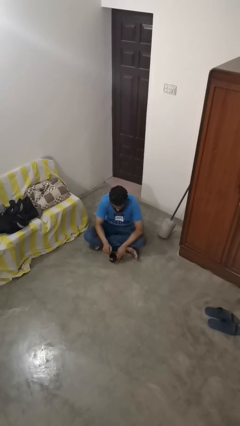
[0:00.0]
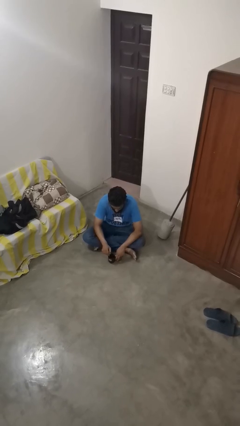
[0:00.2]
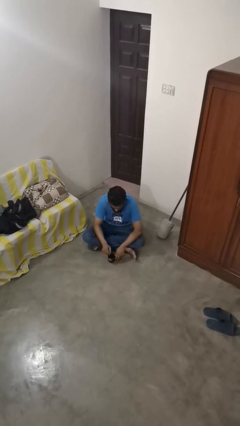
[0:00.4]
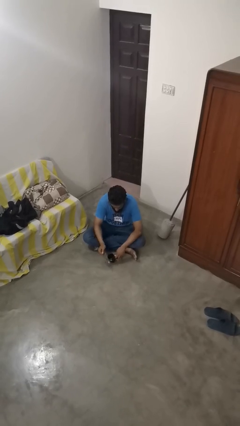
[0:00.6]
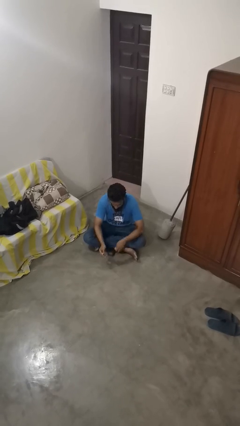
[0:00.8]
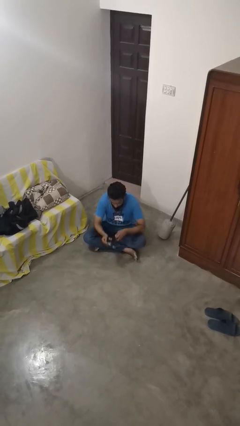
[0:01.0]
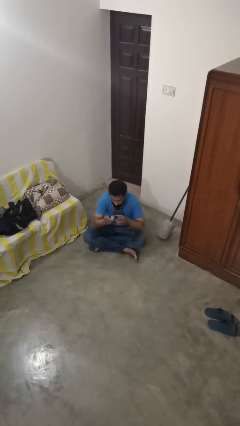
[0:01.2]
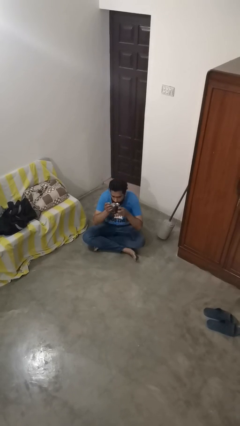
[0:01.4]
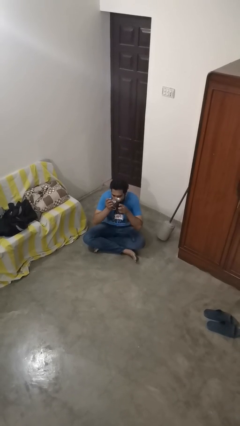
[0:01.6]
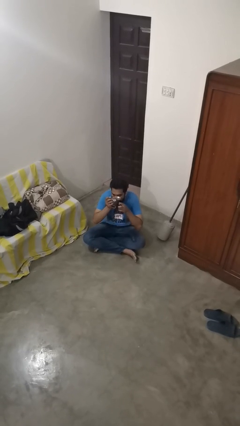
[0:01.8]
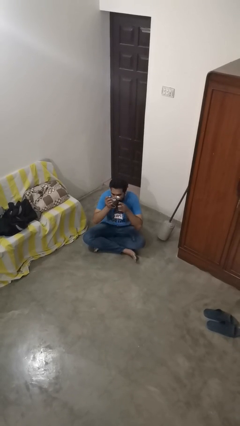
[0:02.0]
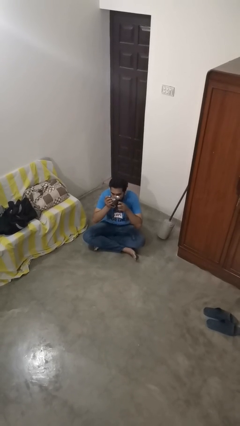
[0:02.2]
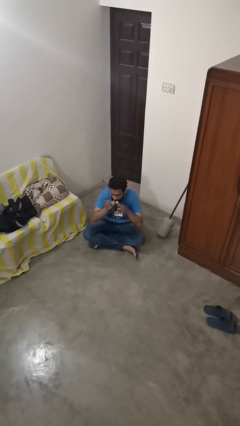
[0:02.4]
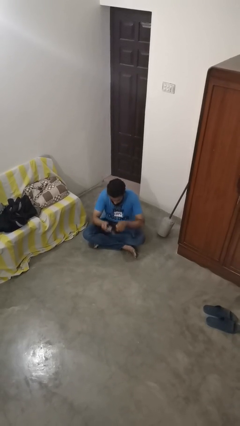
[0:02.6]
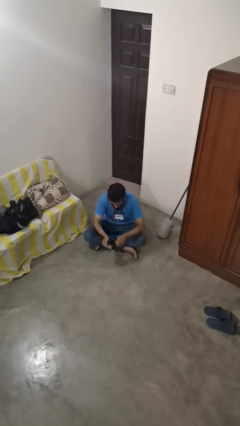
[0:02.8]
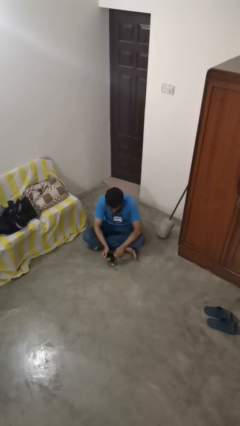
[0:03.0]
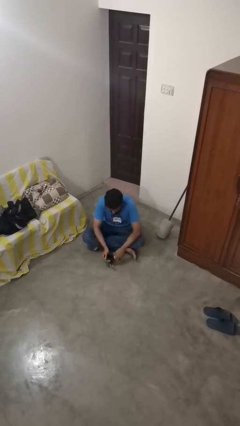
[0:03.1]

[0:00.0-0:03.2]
person drinks from mug

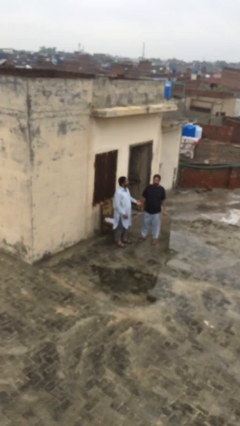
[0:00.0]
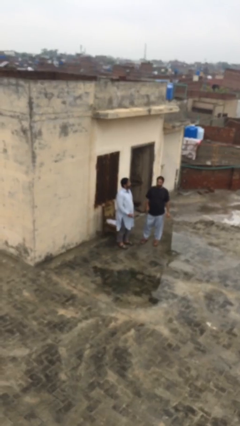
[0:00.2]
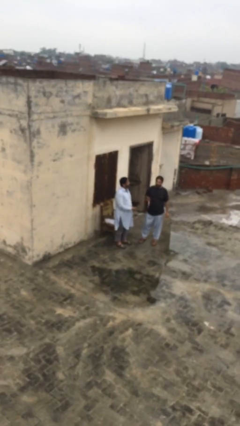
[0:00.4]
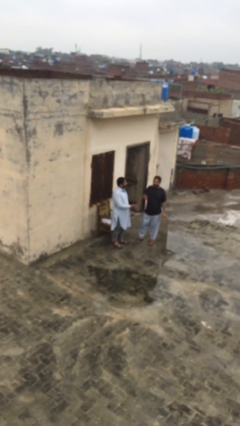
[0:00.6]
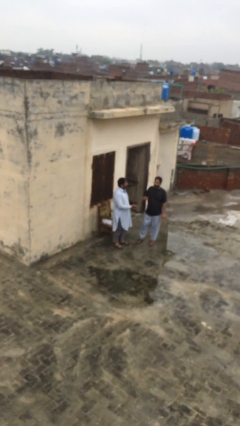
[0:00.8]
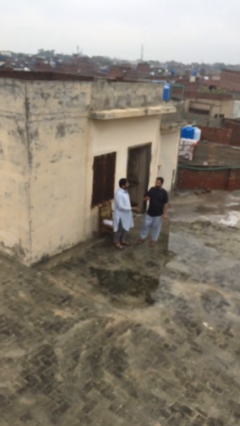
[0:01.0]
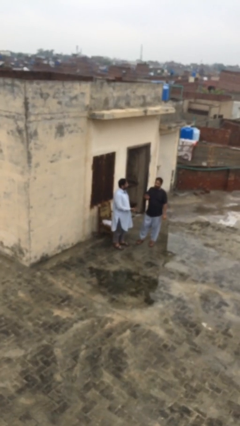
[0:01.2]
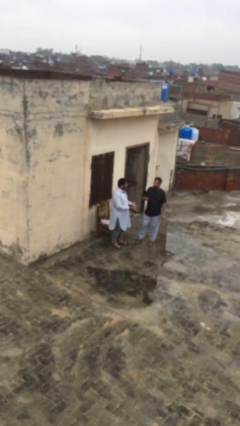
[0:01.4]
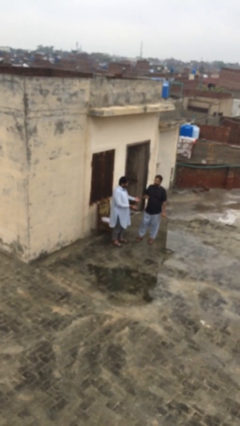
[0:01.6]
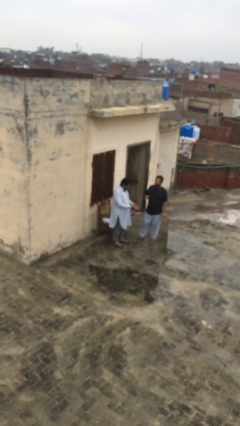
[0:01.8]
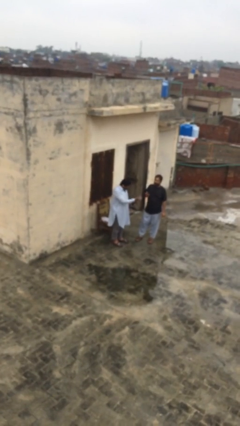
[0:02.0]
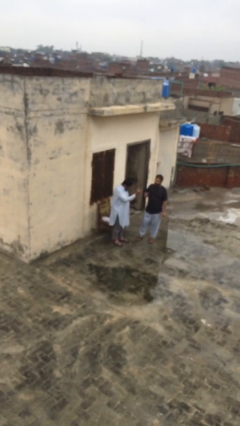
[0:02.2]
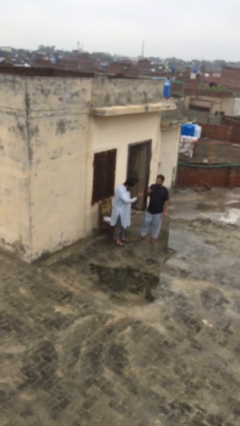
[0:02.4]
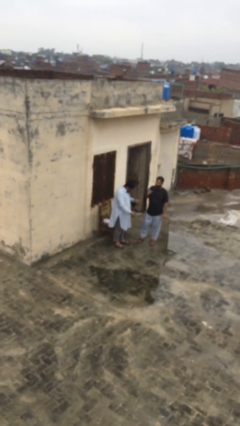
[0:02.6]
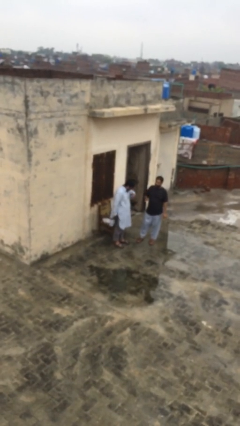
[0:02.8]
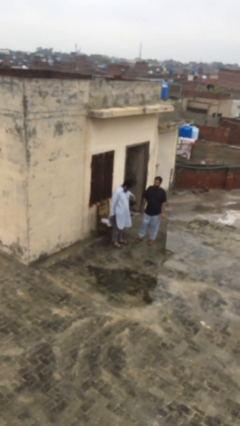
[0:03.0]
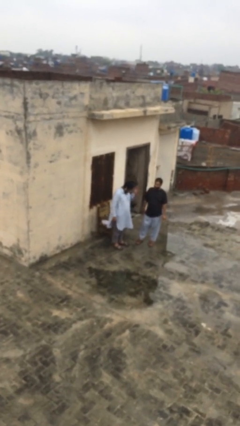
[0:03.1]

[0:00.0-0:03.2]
person talks to person

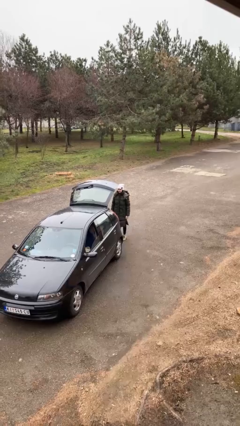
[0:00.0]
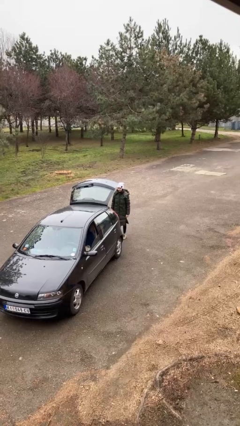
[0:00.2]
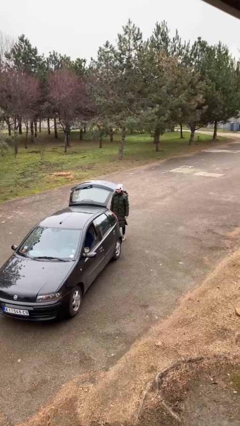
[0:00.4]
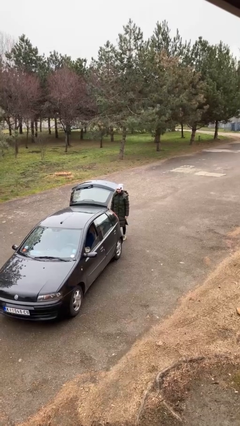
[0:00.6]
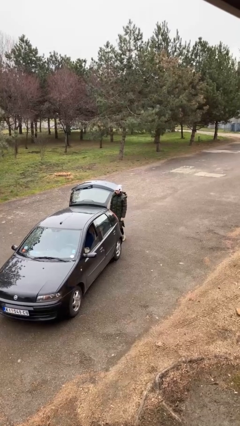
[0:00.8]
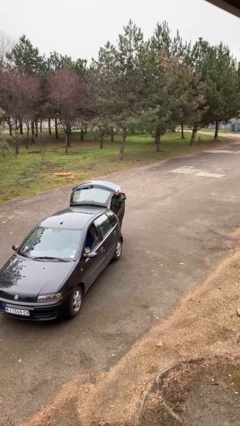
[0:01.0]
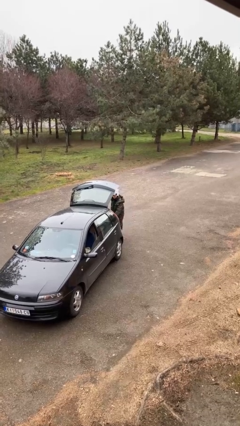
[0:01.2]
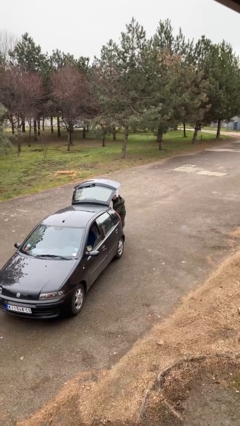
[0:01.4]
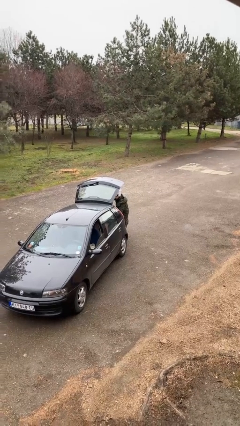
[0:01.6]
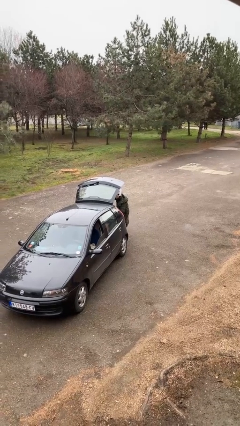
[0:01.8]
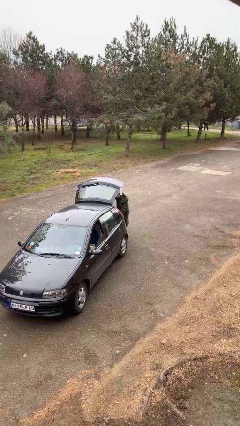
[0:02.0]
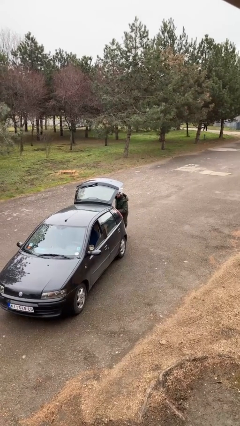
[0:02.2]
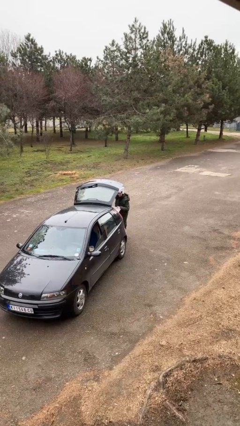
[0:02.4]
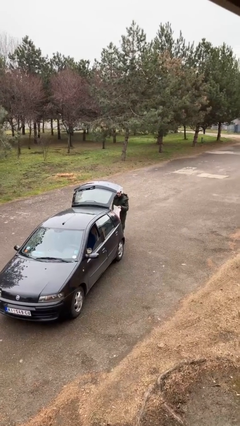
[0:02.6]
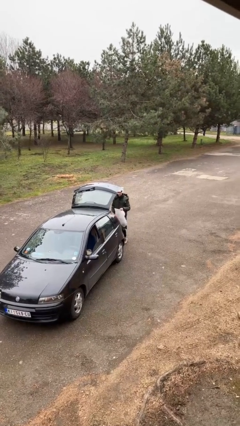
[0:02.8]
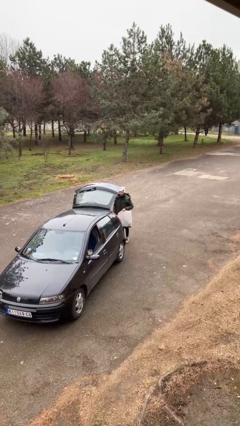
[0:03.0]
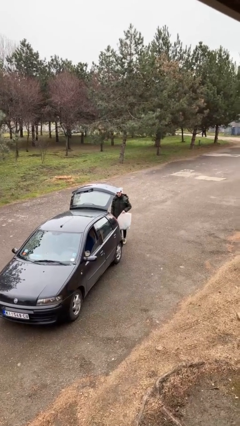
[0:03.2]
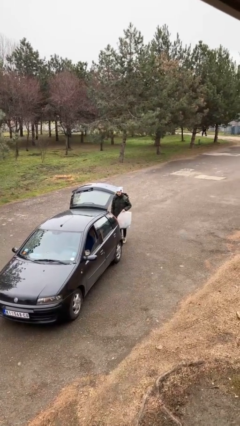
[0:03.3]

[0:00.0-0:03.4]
person unloads car

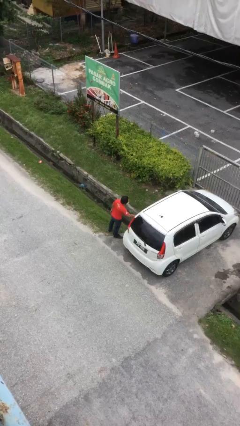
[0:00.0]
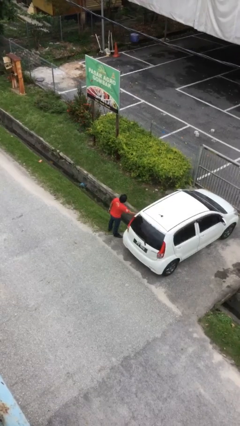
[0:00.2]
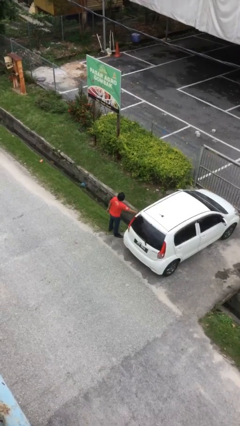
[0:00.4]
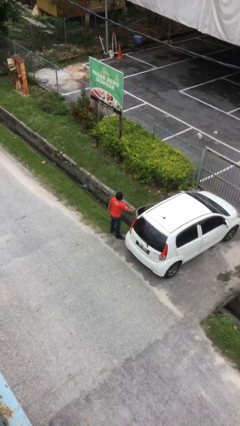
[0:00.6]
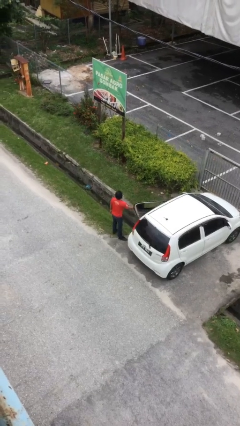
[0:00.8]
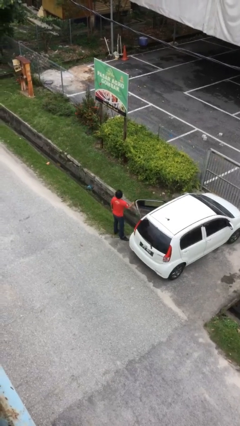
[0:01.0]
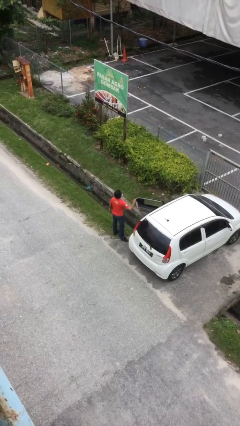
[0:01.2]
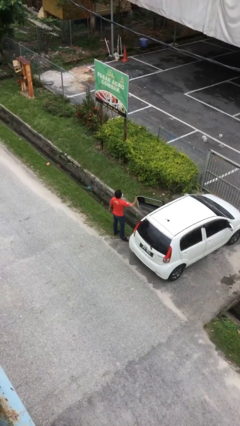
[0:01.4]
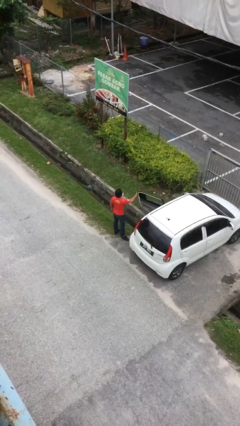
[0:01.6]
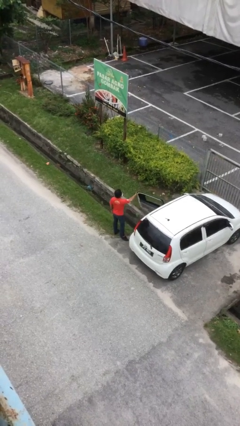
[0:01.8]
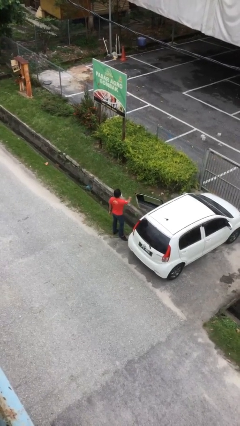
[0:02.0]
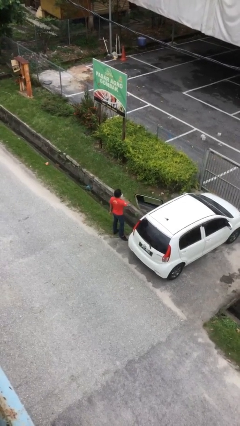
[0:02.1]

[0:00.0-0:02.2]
person opens car door

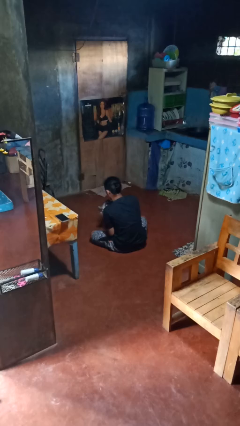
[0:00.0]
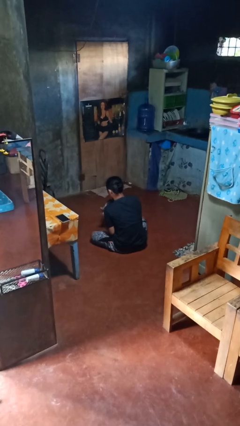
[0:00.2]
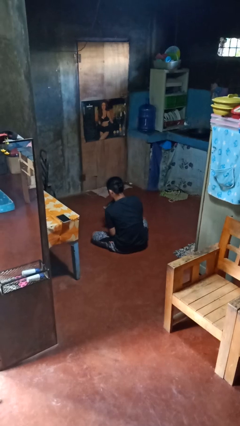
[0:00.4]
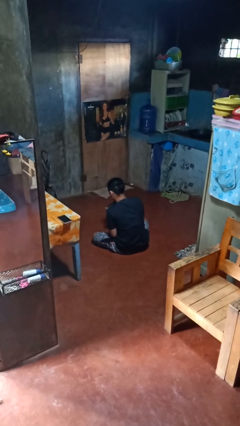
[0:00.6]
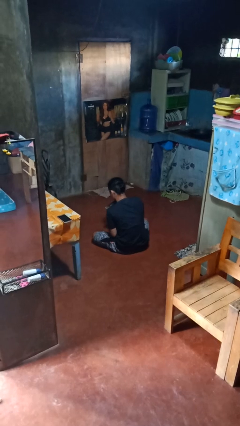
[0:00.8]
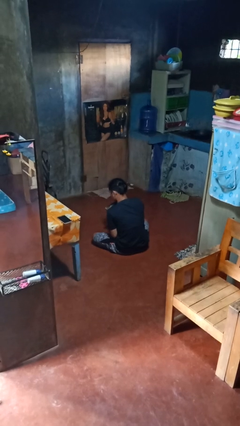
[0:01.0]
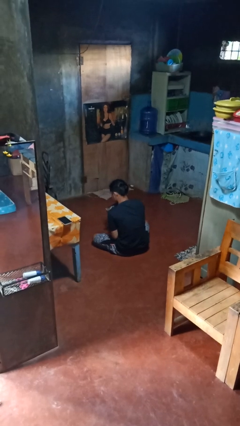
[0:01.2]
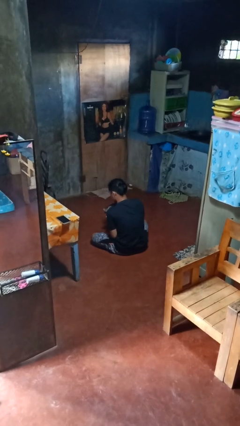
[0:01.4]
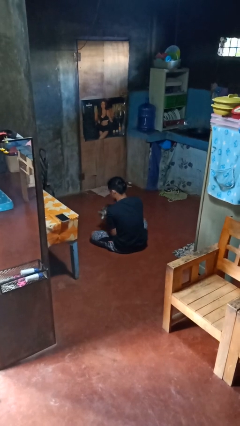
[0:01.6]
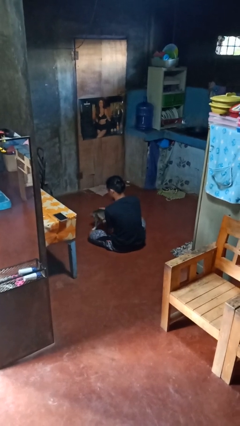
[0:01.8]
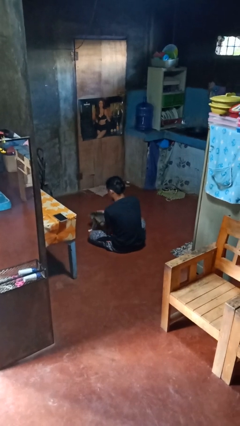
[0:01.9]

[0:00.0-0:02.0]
person hugs cat

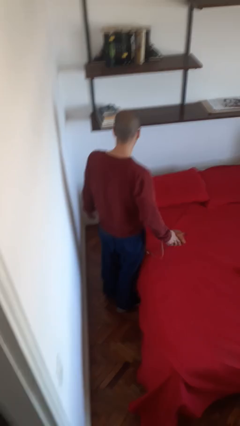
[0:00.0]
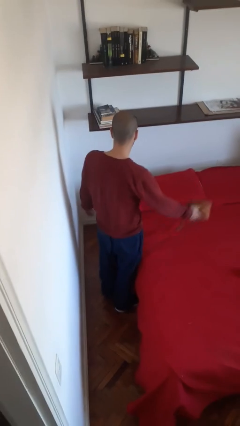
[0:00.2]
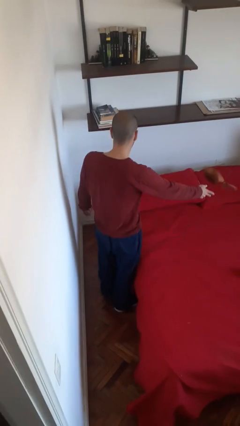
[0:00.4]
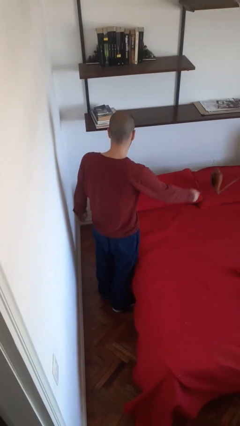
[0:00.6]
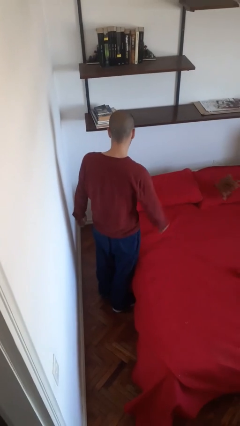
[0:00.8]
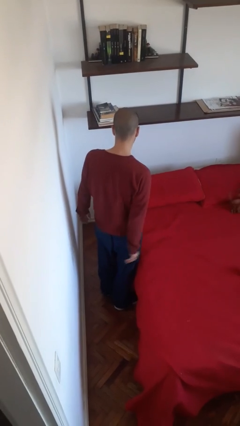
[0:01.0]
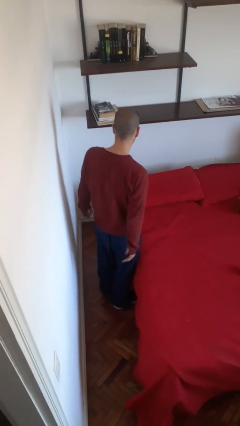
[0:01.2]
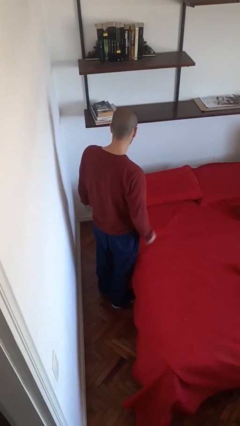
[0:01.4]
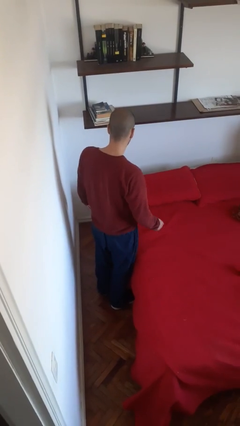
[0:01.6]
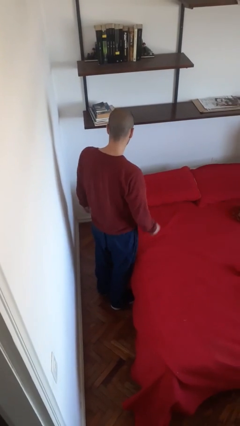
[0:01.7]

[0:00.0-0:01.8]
person throws object on bed

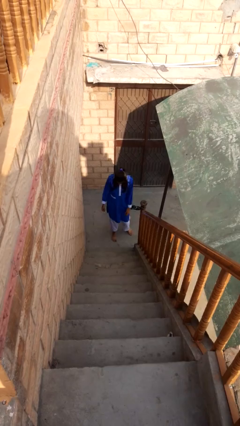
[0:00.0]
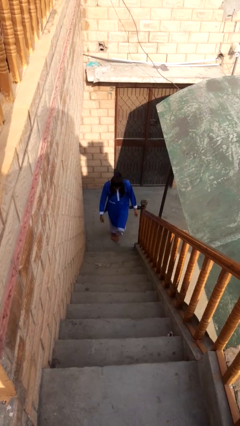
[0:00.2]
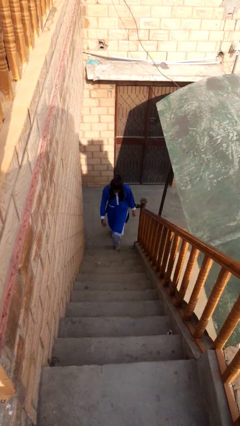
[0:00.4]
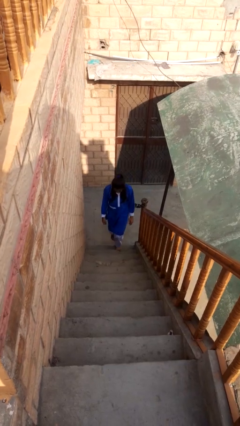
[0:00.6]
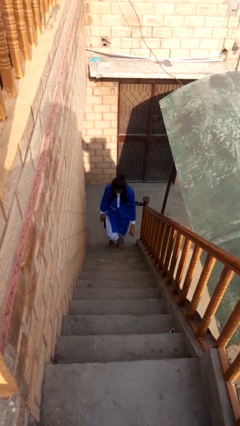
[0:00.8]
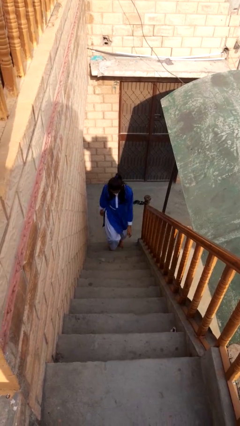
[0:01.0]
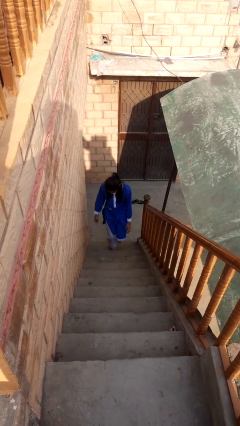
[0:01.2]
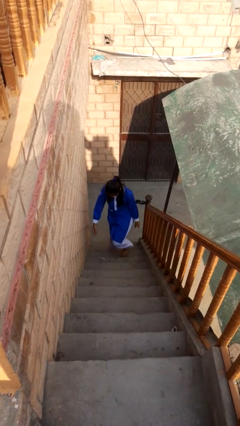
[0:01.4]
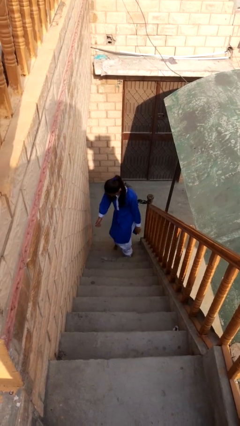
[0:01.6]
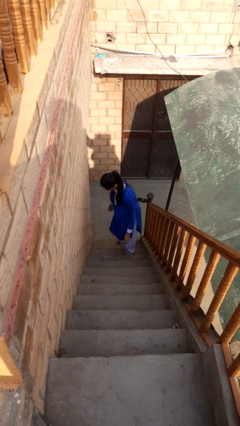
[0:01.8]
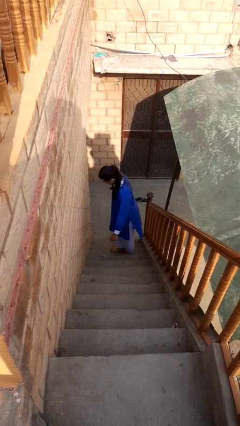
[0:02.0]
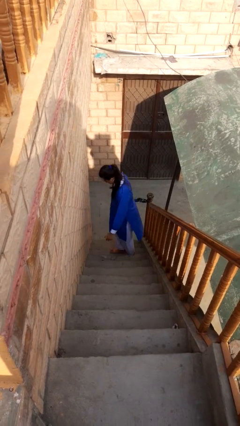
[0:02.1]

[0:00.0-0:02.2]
person climbs up stairs
